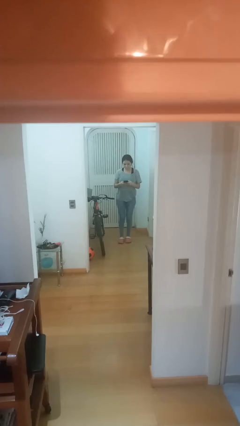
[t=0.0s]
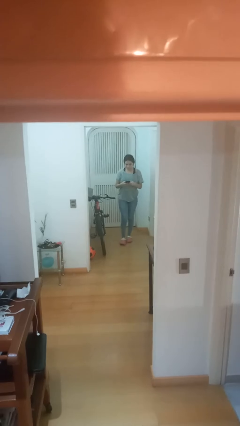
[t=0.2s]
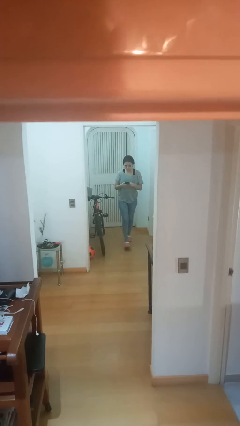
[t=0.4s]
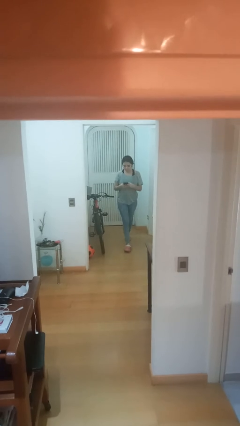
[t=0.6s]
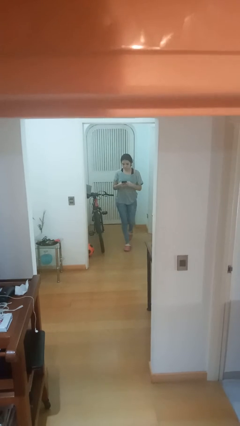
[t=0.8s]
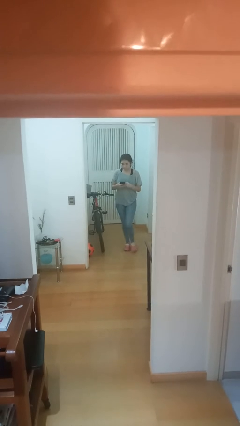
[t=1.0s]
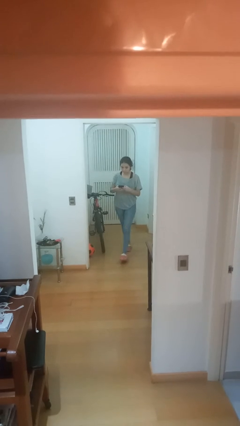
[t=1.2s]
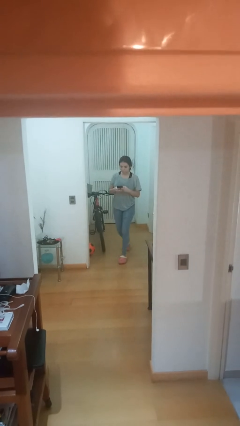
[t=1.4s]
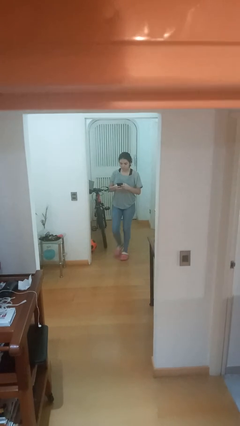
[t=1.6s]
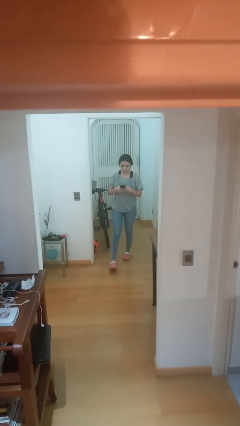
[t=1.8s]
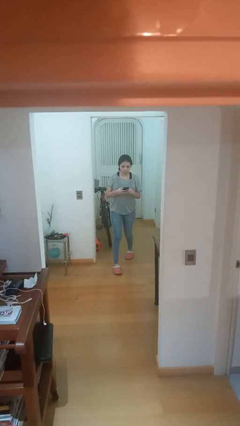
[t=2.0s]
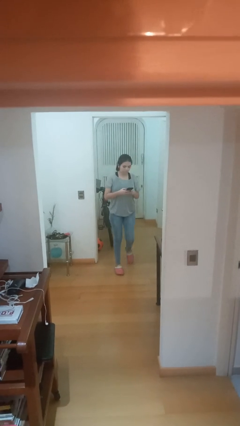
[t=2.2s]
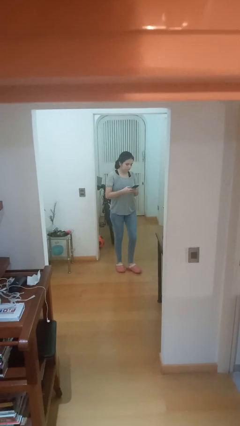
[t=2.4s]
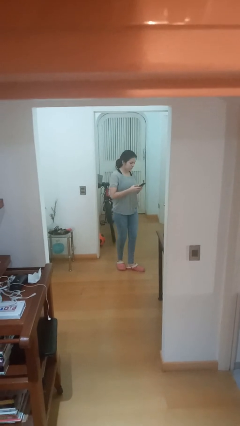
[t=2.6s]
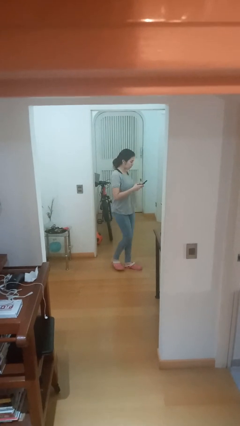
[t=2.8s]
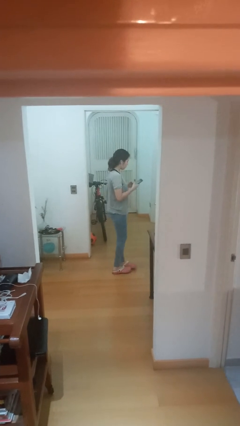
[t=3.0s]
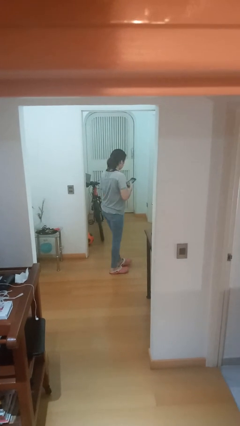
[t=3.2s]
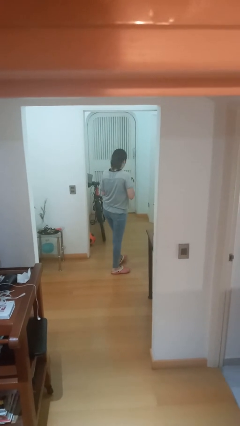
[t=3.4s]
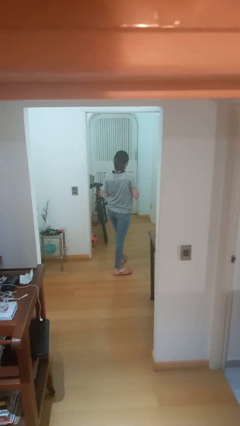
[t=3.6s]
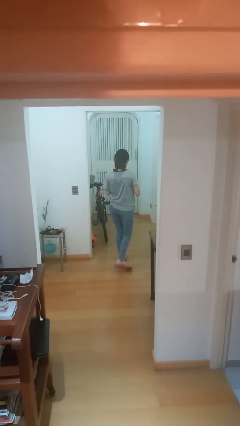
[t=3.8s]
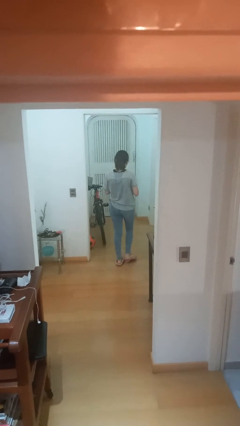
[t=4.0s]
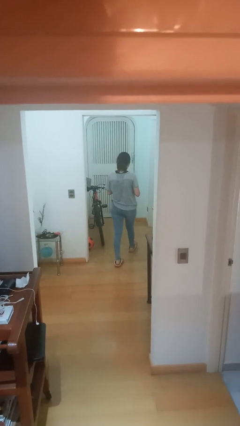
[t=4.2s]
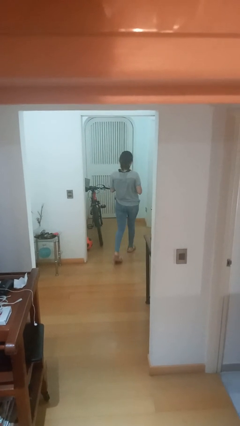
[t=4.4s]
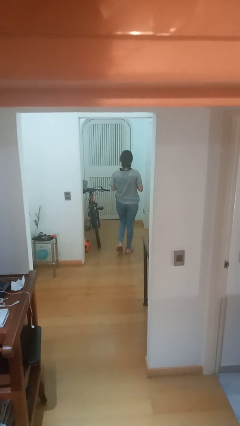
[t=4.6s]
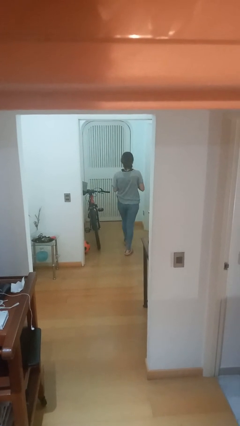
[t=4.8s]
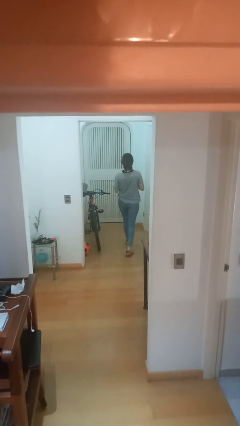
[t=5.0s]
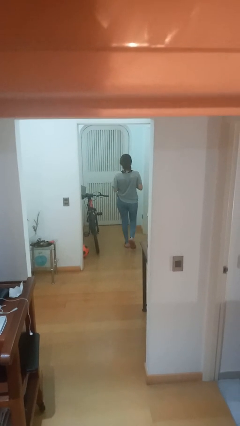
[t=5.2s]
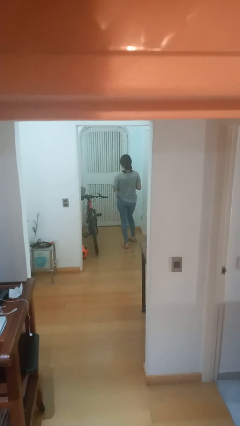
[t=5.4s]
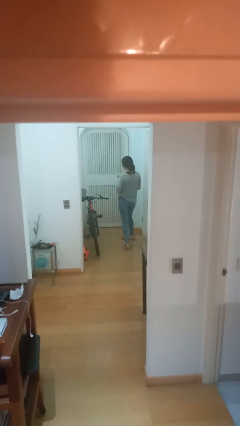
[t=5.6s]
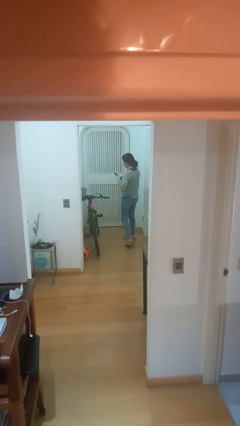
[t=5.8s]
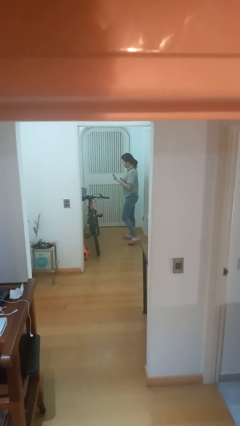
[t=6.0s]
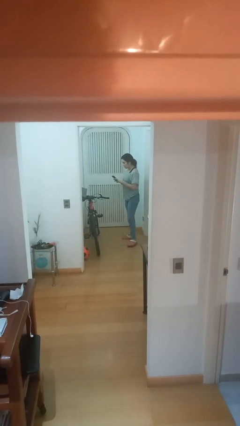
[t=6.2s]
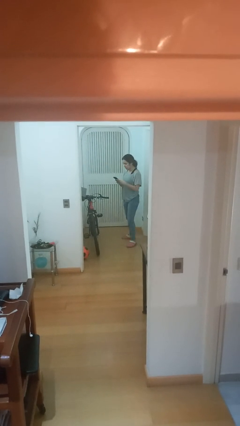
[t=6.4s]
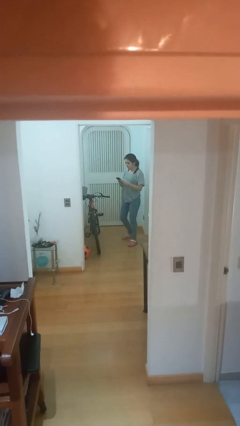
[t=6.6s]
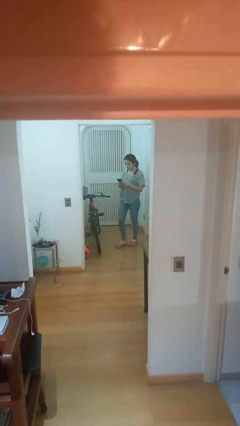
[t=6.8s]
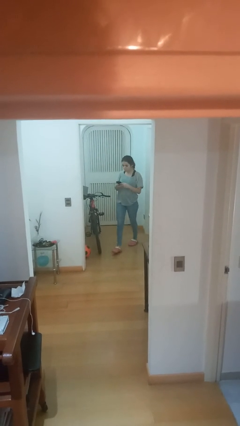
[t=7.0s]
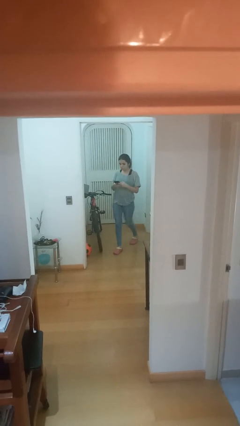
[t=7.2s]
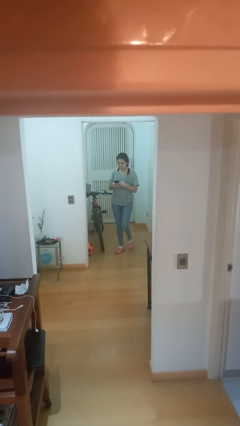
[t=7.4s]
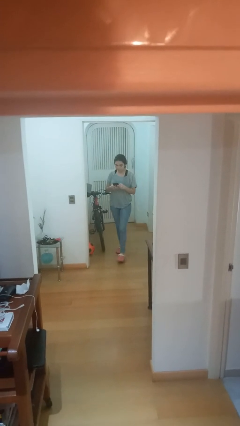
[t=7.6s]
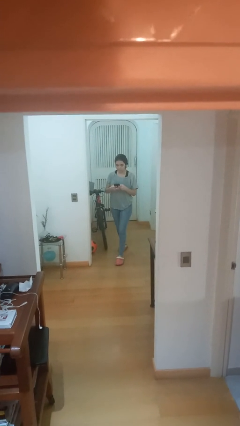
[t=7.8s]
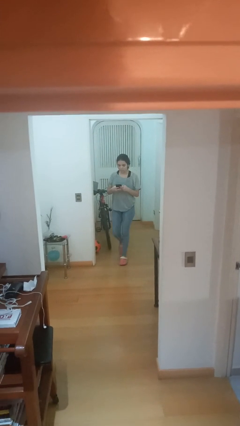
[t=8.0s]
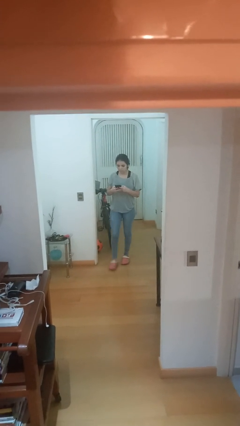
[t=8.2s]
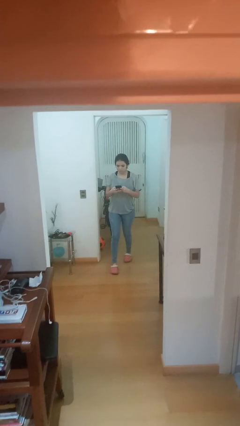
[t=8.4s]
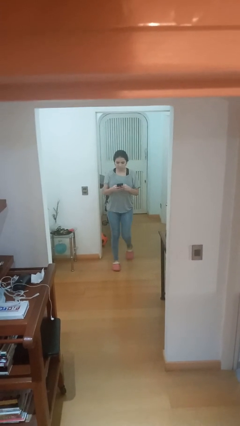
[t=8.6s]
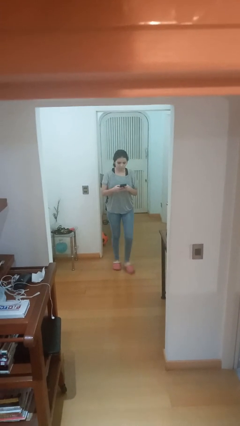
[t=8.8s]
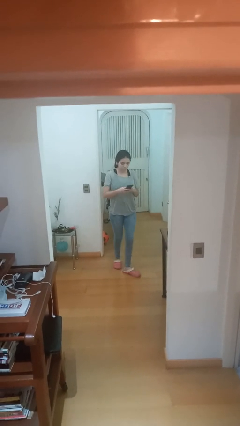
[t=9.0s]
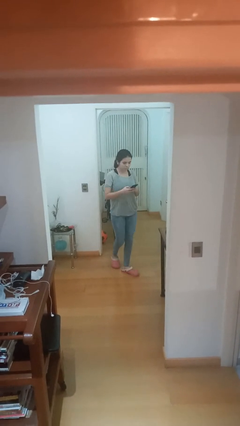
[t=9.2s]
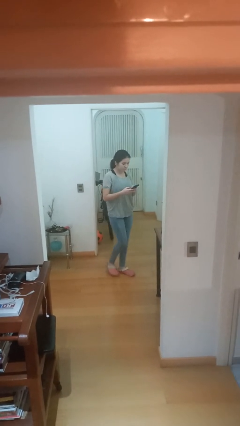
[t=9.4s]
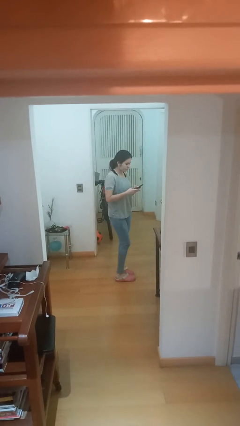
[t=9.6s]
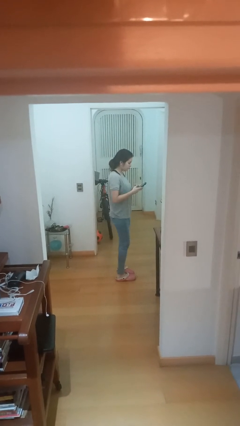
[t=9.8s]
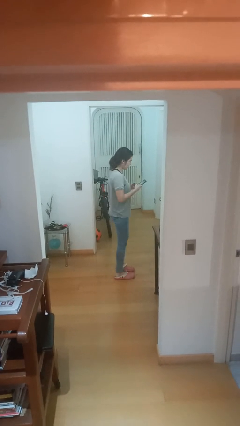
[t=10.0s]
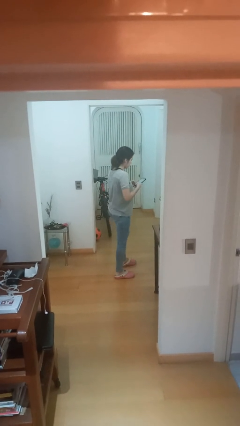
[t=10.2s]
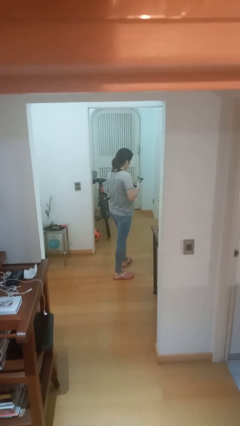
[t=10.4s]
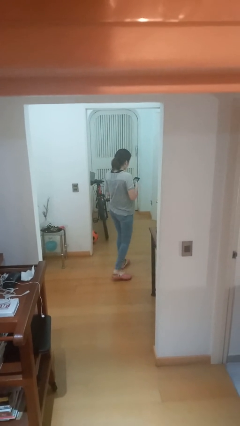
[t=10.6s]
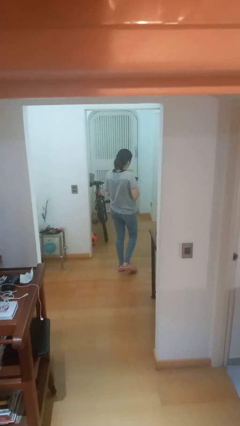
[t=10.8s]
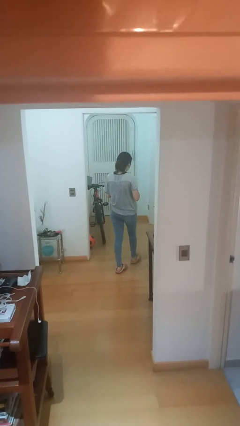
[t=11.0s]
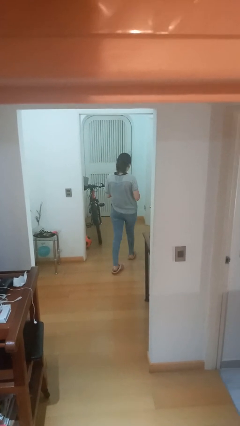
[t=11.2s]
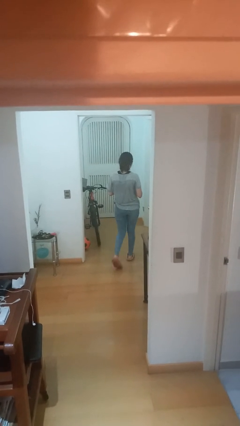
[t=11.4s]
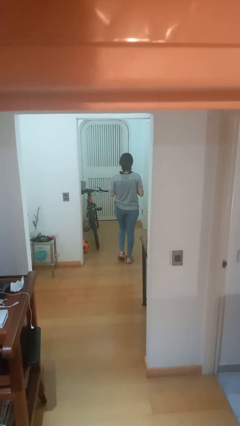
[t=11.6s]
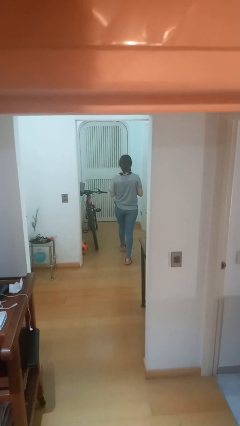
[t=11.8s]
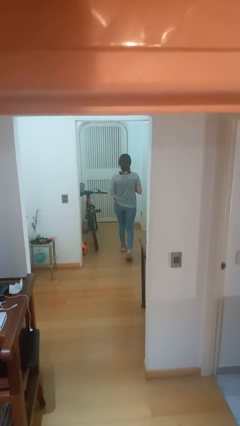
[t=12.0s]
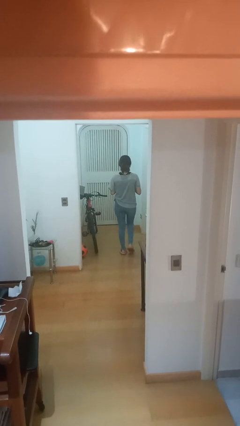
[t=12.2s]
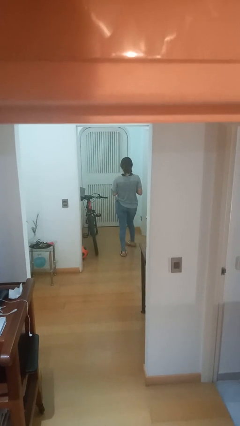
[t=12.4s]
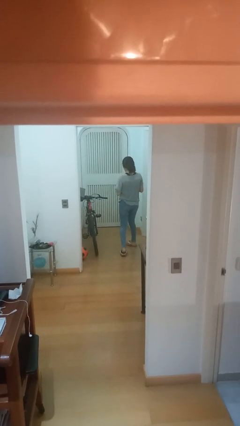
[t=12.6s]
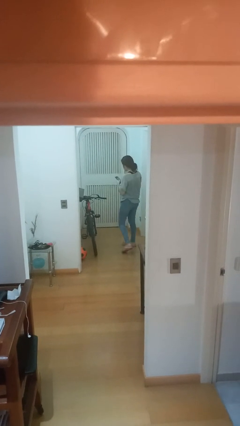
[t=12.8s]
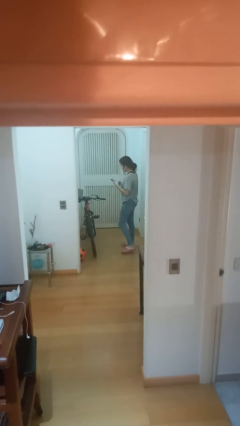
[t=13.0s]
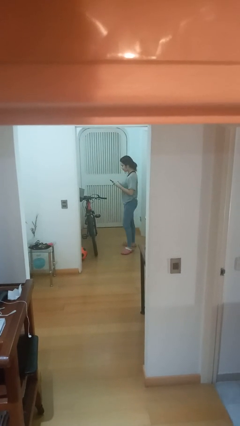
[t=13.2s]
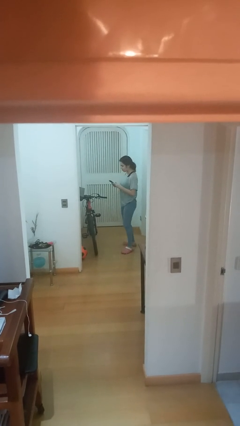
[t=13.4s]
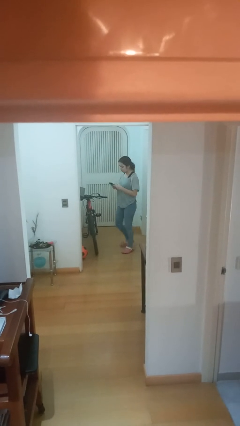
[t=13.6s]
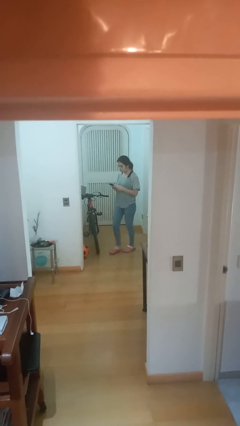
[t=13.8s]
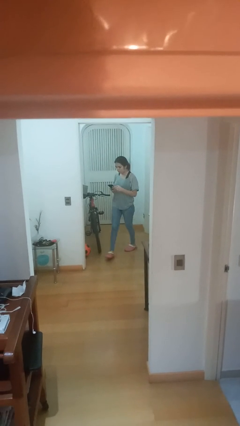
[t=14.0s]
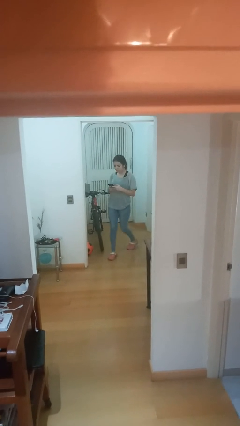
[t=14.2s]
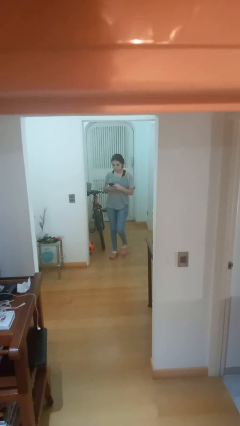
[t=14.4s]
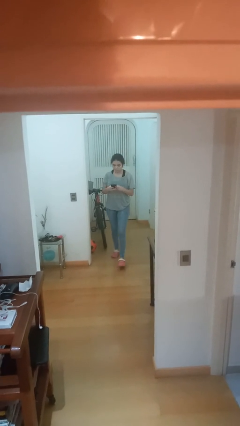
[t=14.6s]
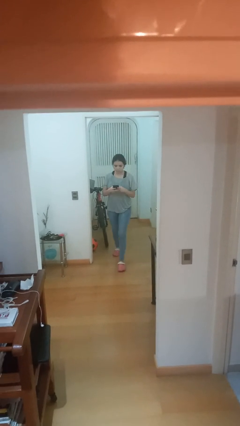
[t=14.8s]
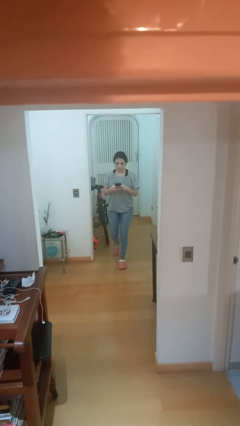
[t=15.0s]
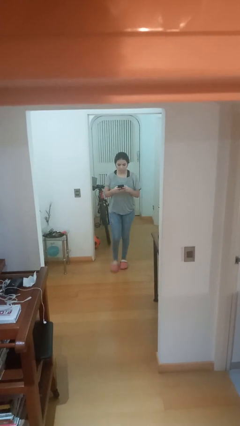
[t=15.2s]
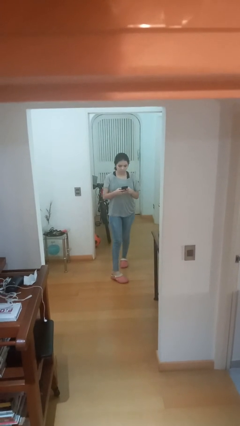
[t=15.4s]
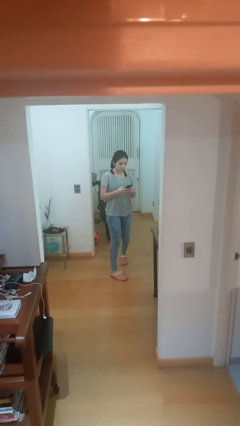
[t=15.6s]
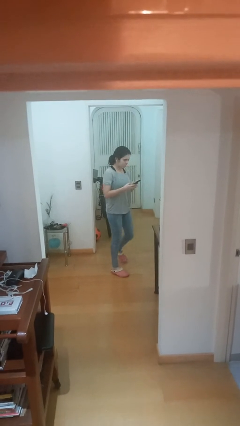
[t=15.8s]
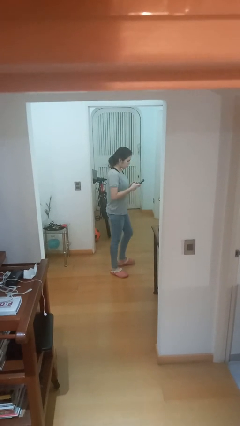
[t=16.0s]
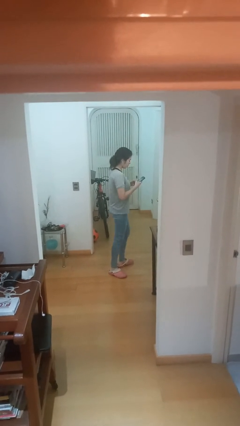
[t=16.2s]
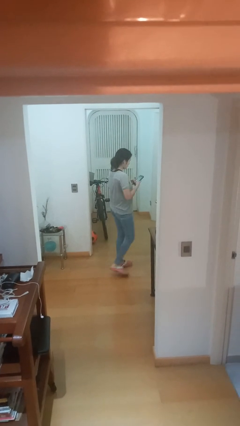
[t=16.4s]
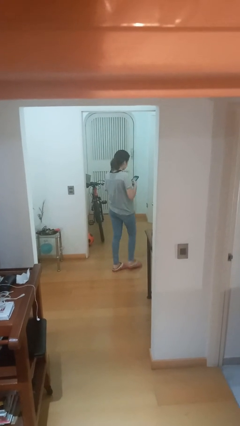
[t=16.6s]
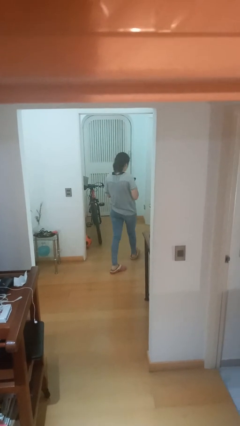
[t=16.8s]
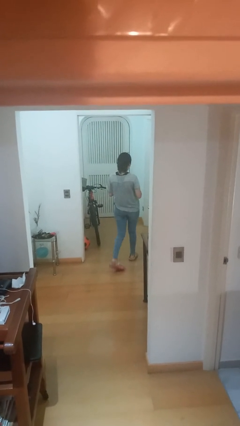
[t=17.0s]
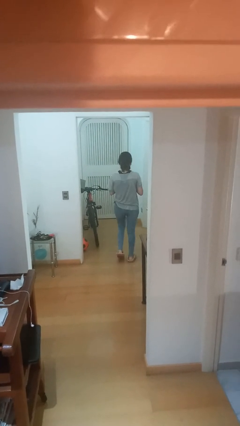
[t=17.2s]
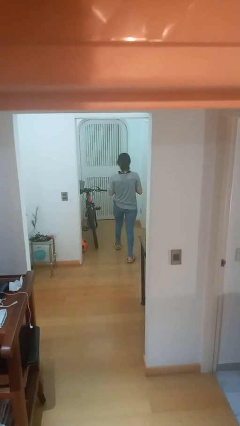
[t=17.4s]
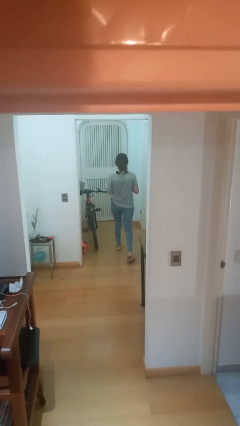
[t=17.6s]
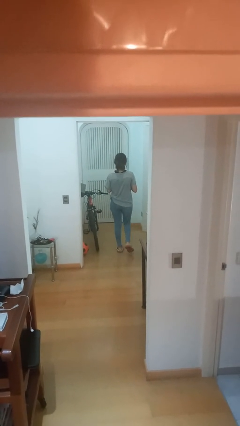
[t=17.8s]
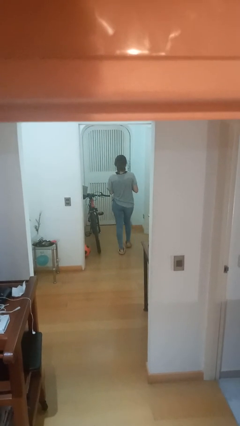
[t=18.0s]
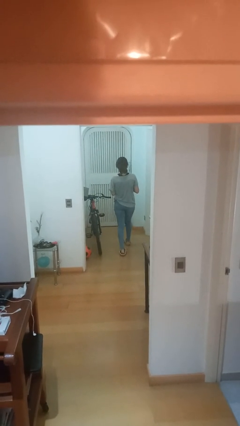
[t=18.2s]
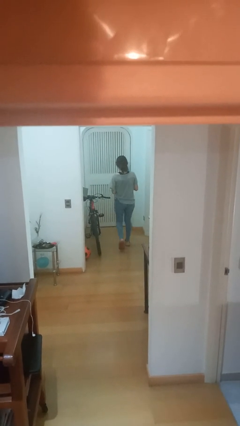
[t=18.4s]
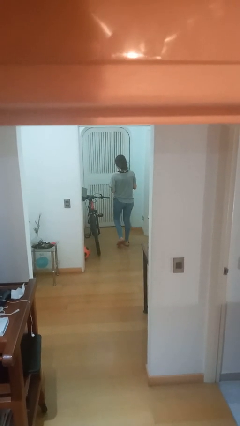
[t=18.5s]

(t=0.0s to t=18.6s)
person texts on phone
